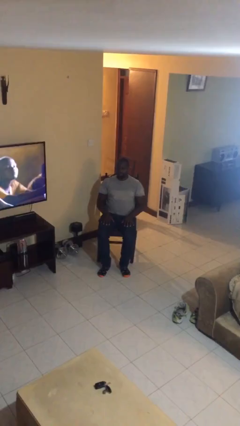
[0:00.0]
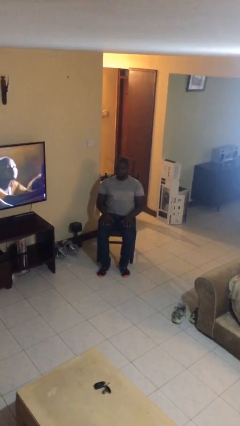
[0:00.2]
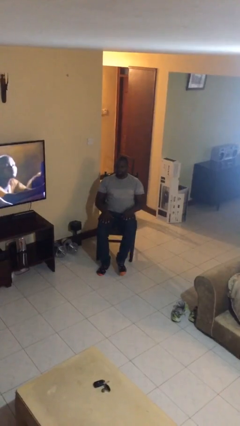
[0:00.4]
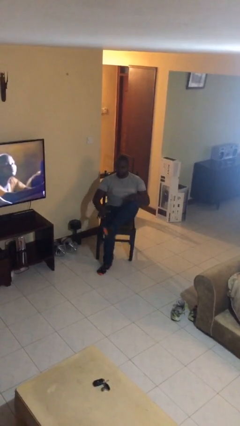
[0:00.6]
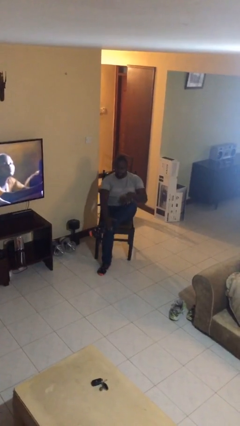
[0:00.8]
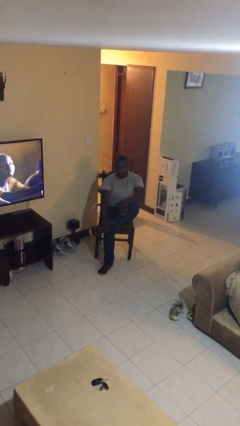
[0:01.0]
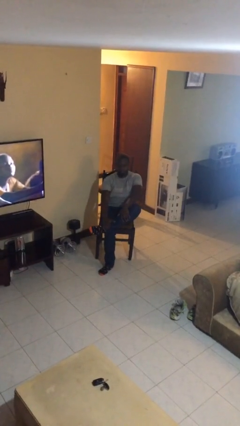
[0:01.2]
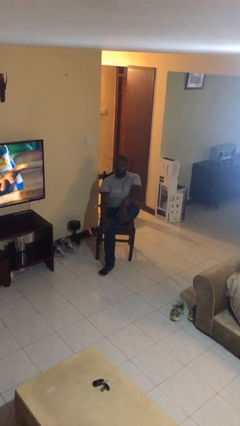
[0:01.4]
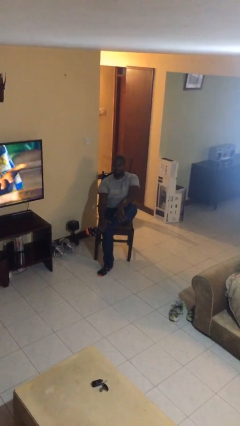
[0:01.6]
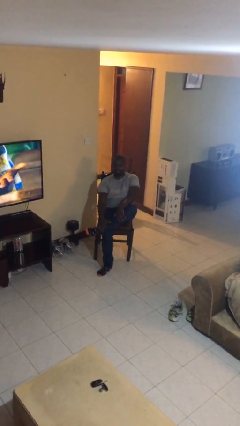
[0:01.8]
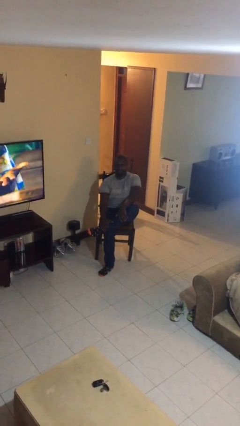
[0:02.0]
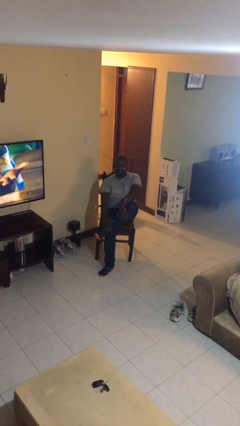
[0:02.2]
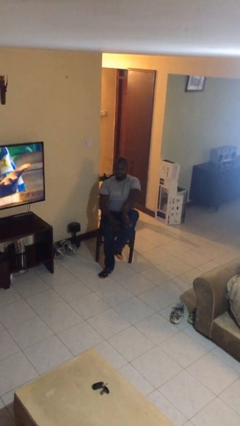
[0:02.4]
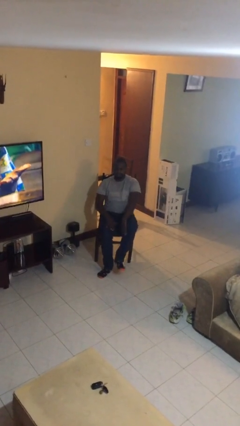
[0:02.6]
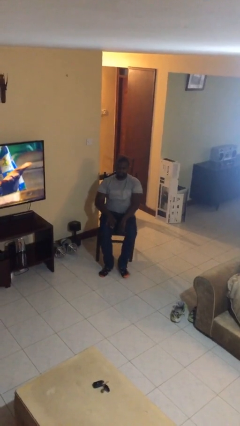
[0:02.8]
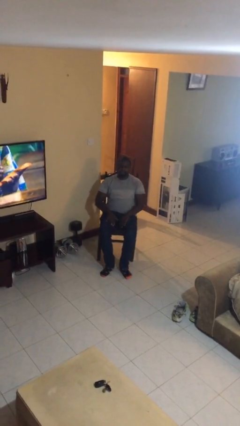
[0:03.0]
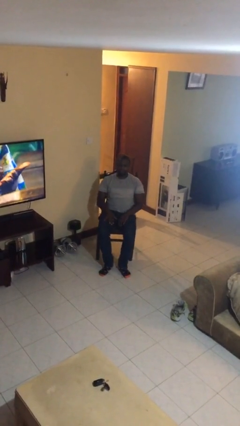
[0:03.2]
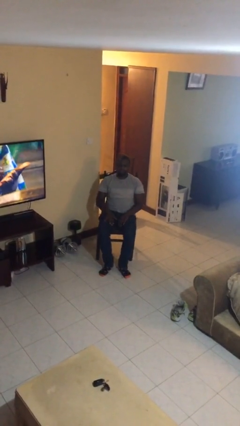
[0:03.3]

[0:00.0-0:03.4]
person crosses legs

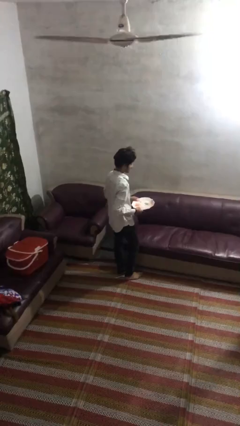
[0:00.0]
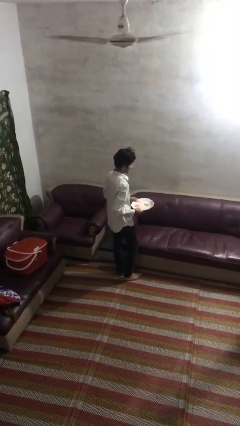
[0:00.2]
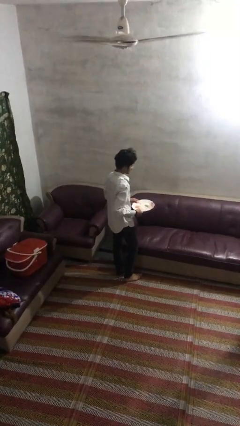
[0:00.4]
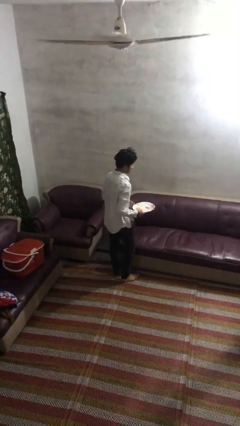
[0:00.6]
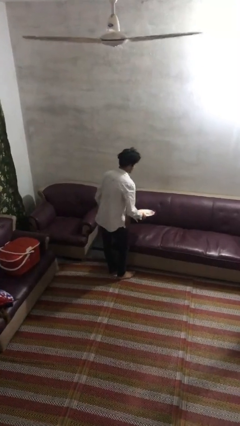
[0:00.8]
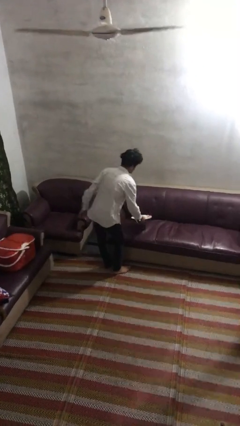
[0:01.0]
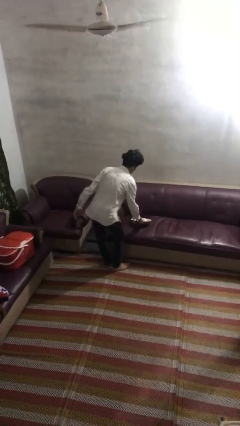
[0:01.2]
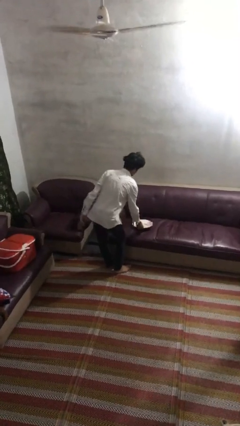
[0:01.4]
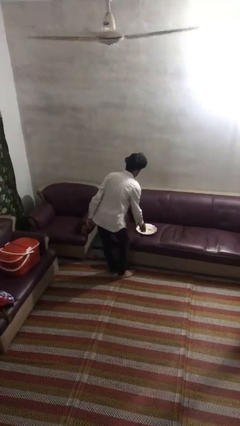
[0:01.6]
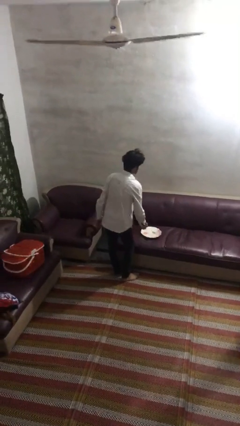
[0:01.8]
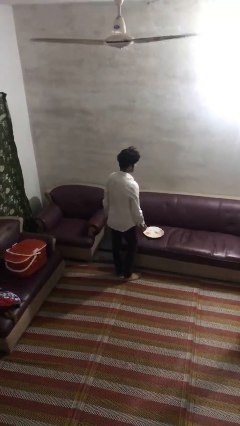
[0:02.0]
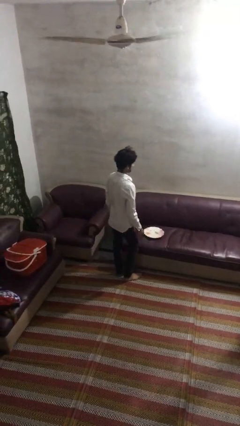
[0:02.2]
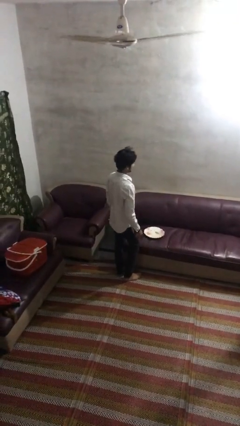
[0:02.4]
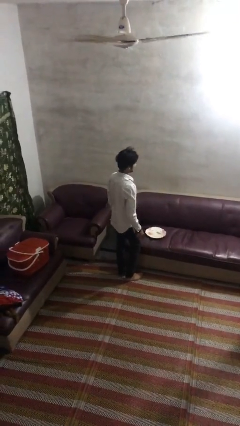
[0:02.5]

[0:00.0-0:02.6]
person puts down object on couch

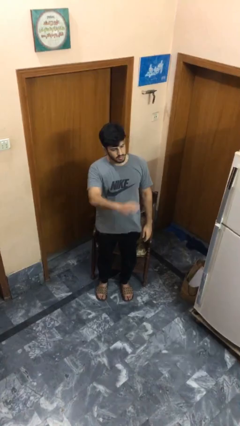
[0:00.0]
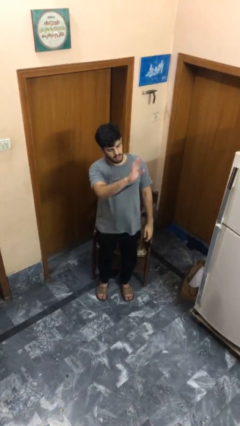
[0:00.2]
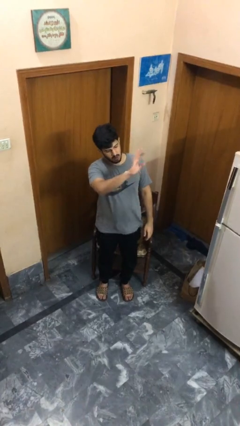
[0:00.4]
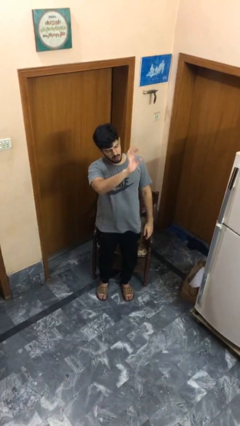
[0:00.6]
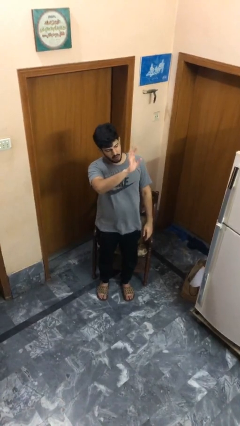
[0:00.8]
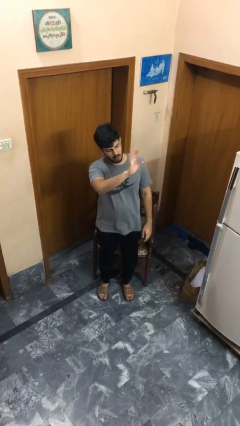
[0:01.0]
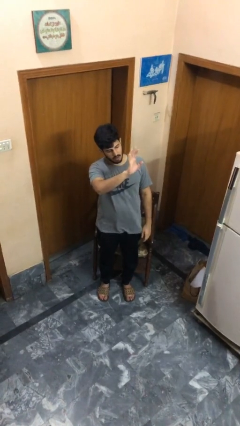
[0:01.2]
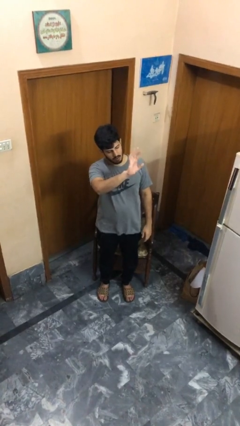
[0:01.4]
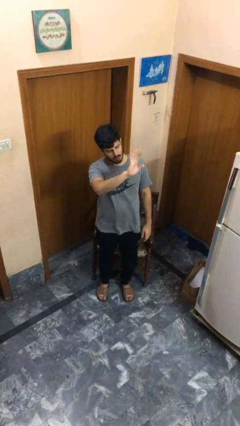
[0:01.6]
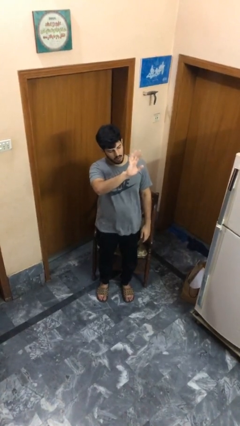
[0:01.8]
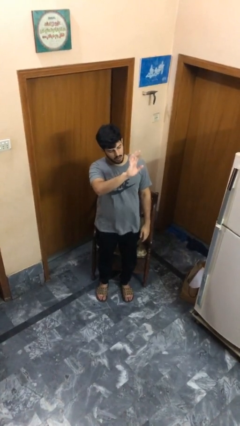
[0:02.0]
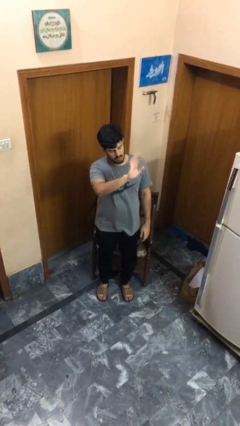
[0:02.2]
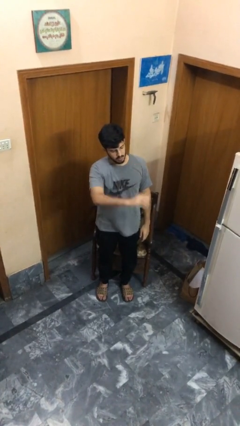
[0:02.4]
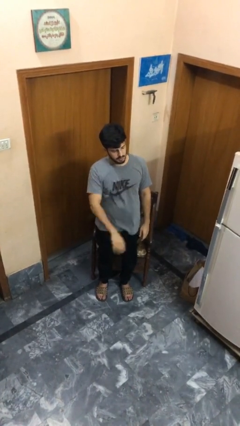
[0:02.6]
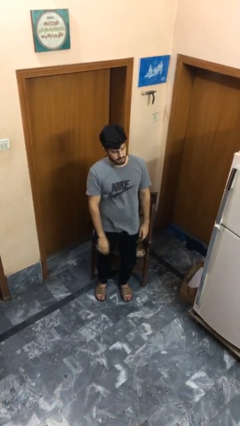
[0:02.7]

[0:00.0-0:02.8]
person waves at person

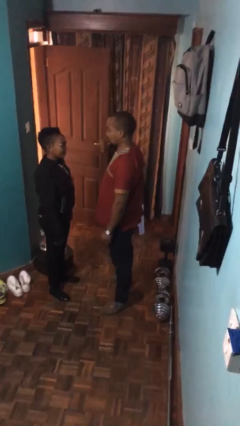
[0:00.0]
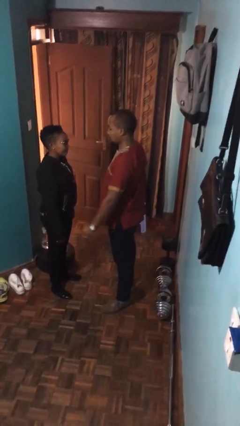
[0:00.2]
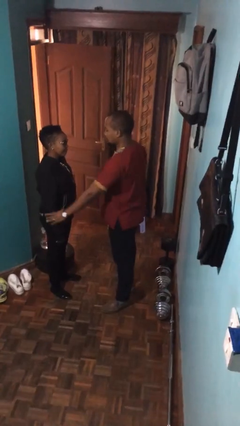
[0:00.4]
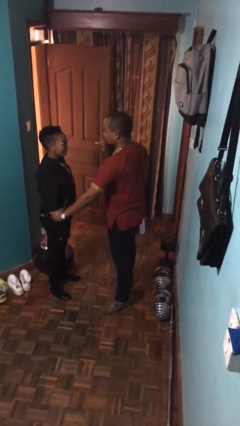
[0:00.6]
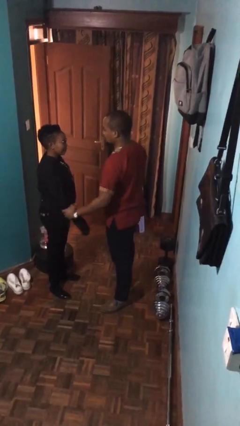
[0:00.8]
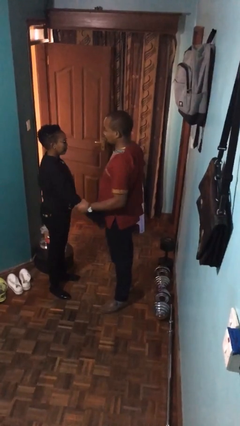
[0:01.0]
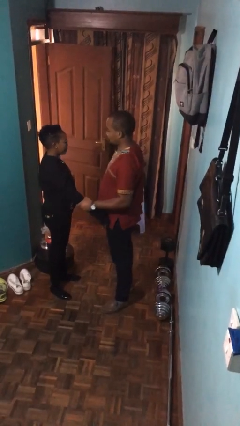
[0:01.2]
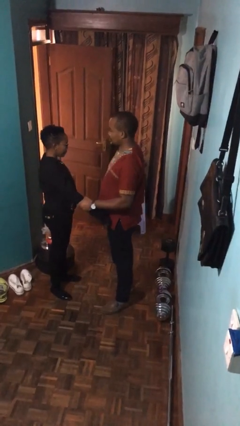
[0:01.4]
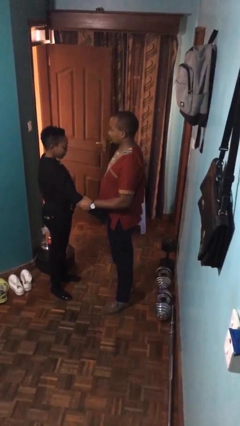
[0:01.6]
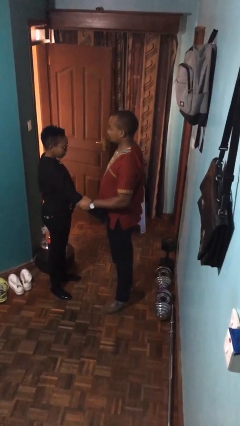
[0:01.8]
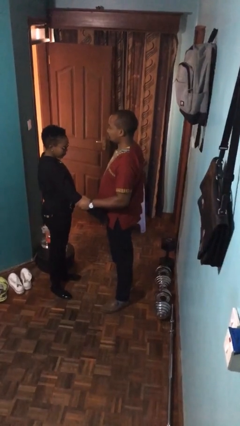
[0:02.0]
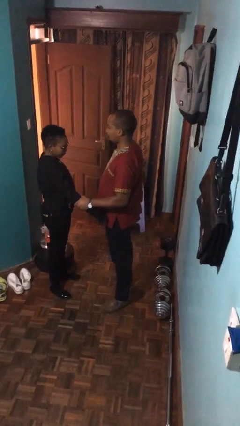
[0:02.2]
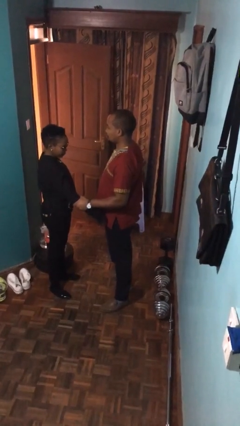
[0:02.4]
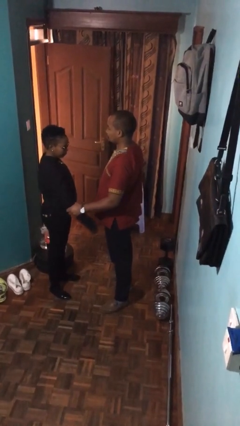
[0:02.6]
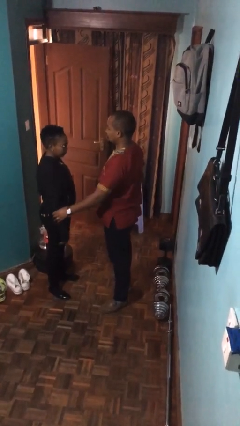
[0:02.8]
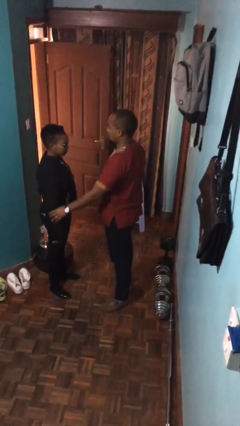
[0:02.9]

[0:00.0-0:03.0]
person grabs person by forearm

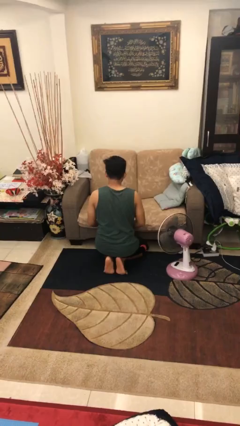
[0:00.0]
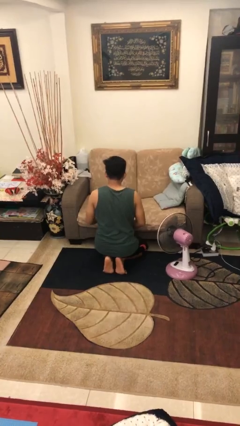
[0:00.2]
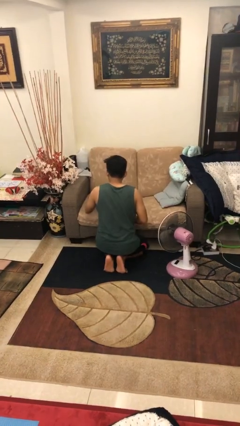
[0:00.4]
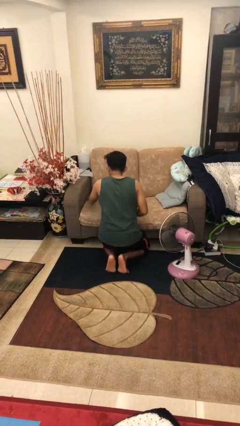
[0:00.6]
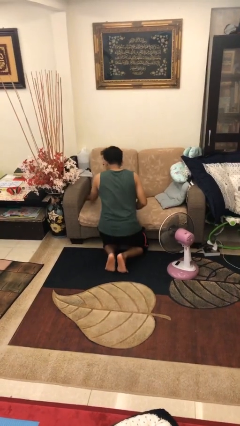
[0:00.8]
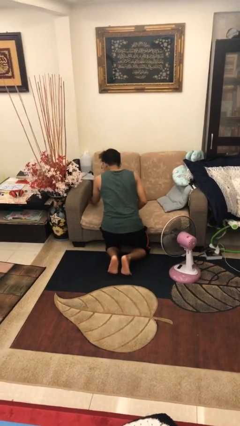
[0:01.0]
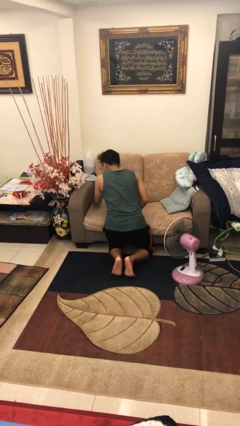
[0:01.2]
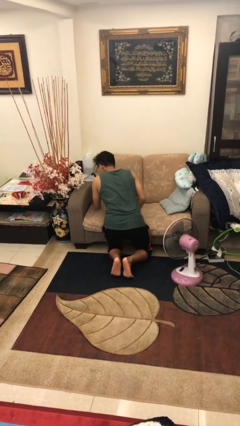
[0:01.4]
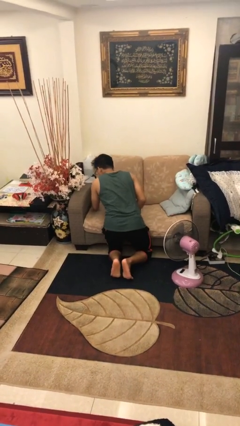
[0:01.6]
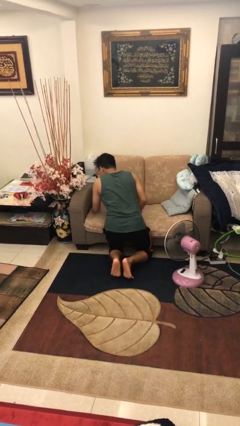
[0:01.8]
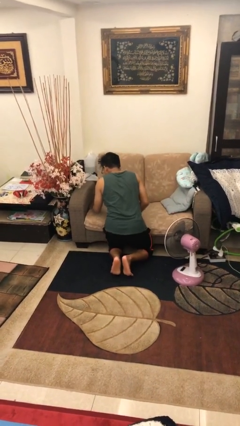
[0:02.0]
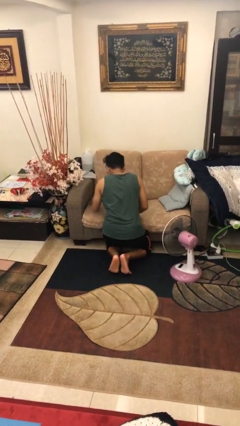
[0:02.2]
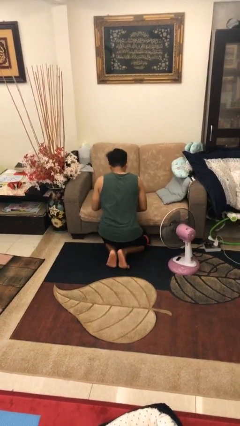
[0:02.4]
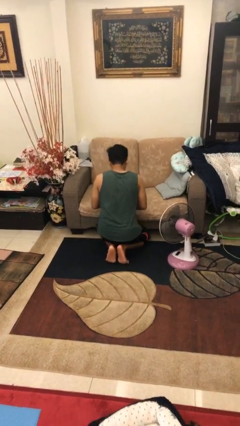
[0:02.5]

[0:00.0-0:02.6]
person searches in couch

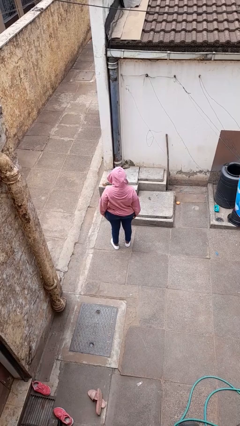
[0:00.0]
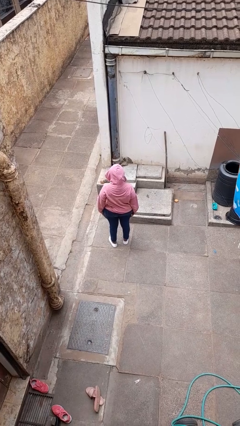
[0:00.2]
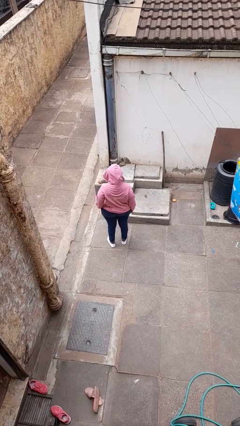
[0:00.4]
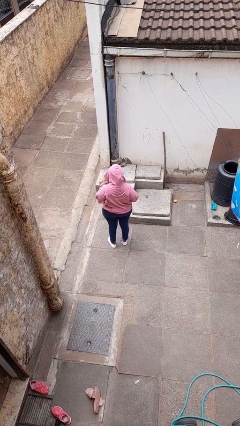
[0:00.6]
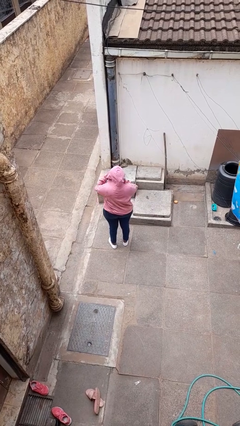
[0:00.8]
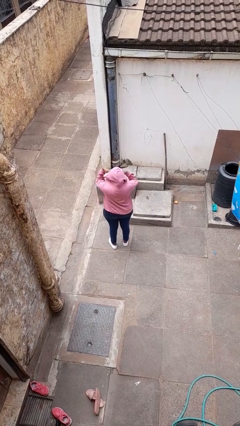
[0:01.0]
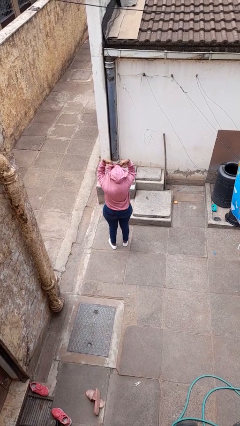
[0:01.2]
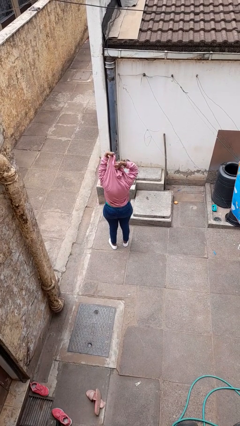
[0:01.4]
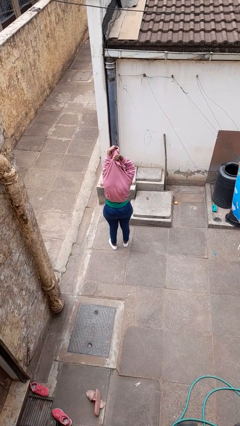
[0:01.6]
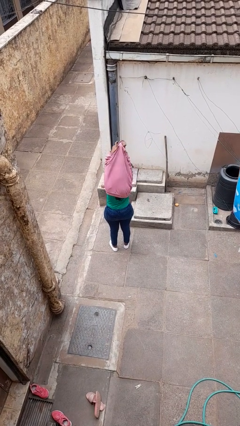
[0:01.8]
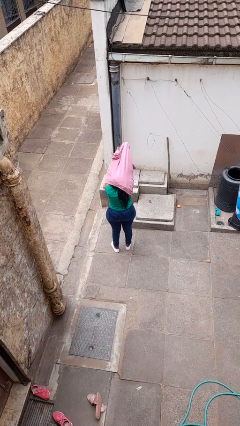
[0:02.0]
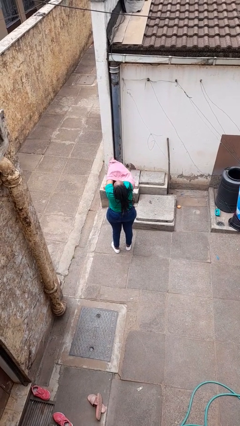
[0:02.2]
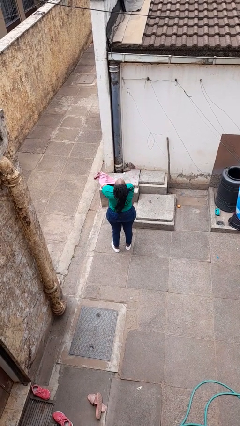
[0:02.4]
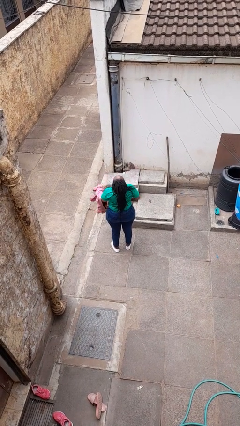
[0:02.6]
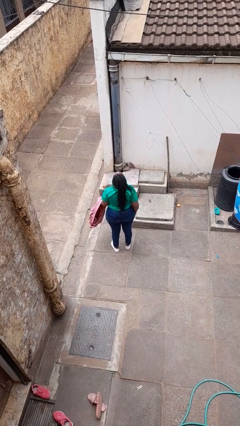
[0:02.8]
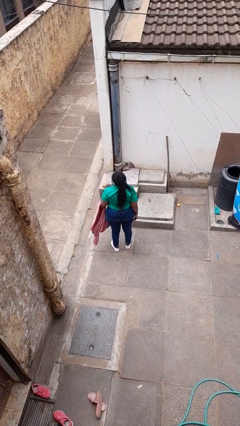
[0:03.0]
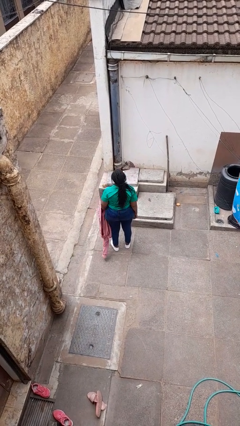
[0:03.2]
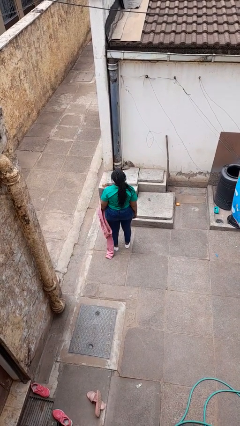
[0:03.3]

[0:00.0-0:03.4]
person takes off hoodie
